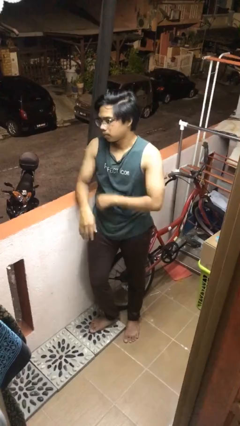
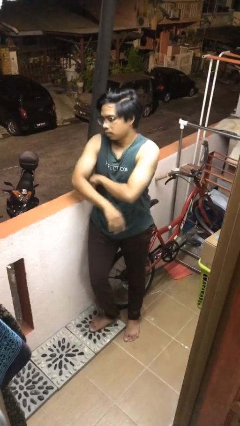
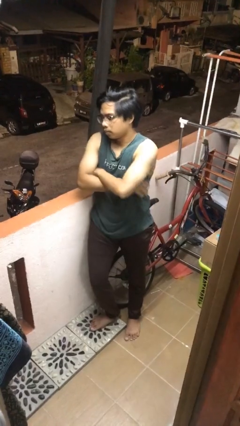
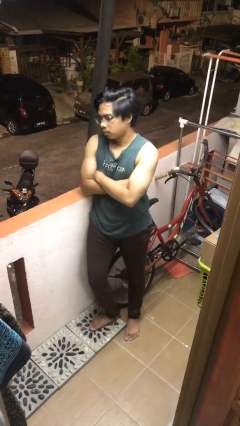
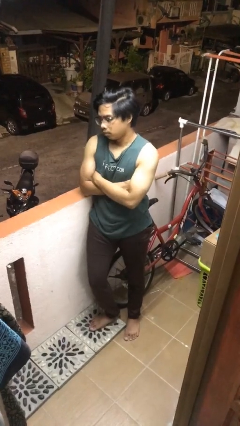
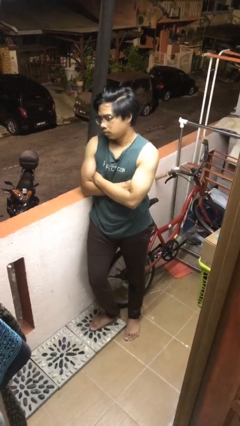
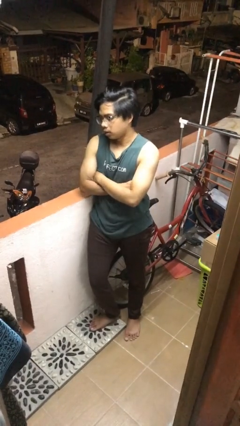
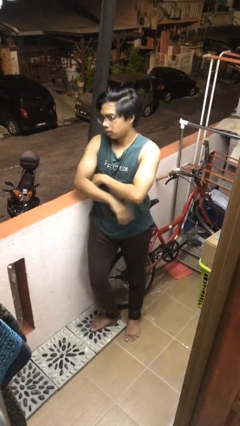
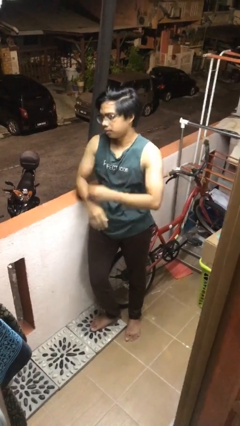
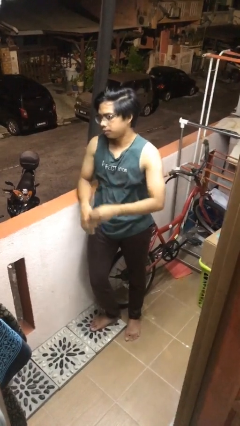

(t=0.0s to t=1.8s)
person crosses arms

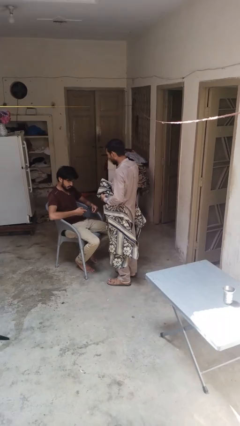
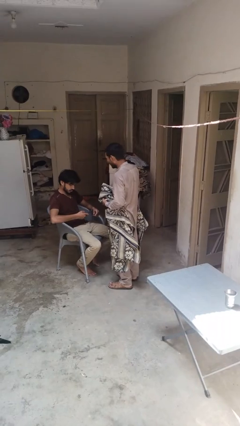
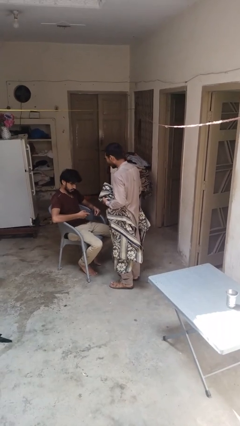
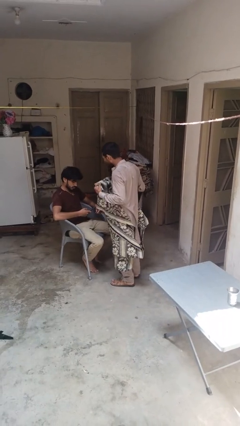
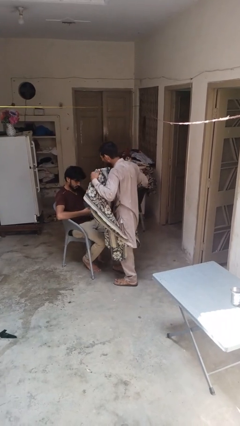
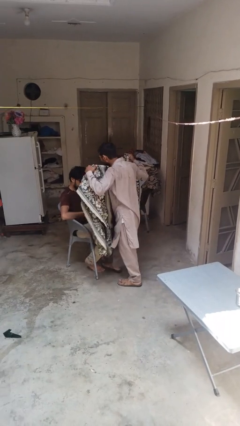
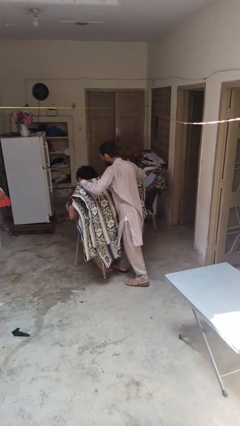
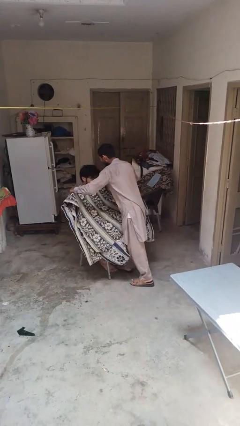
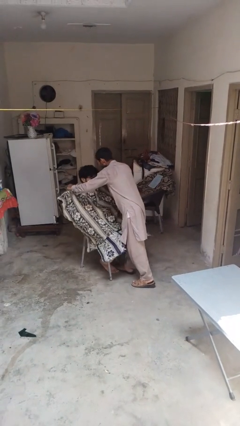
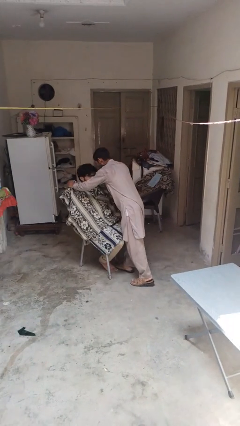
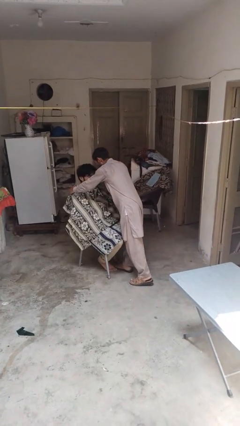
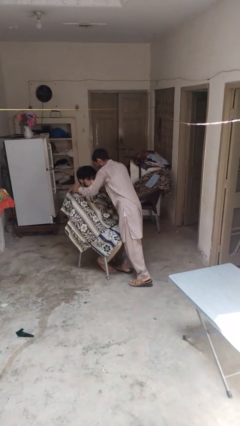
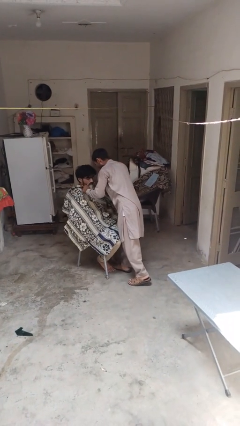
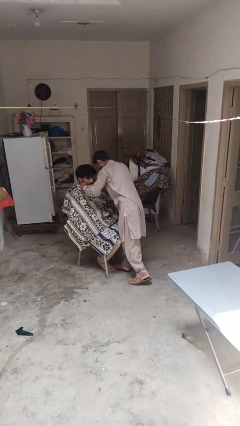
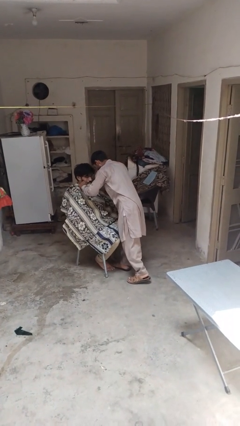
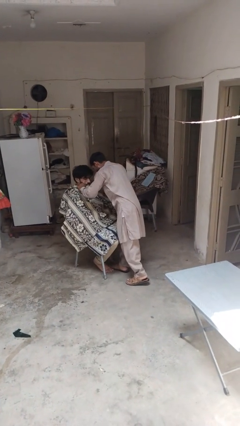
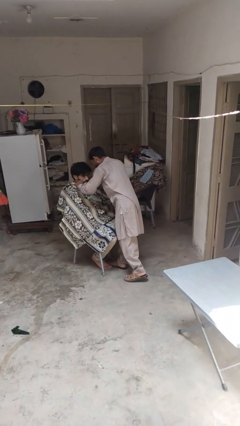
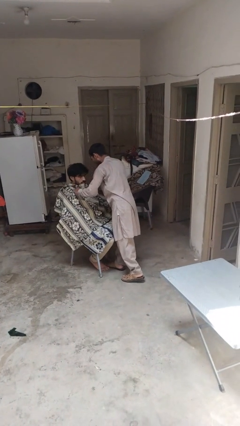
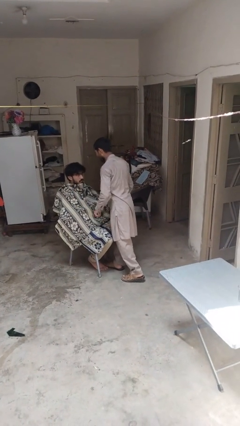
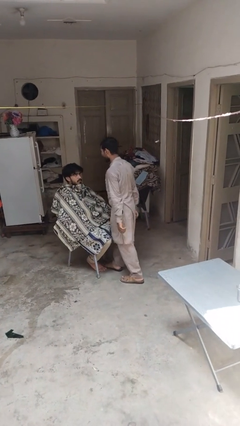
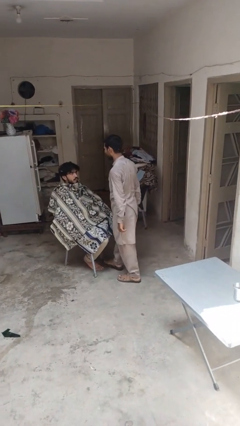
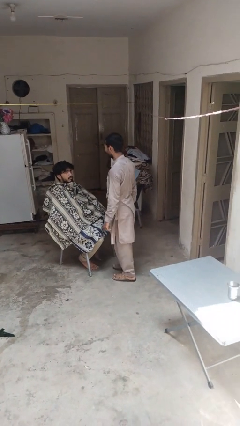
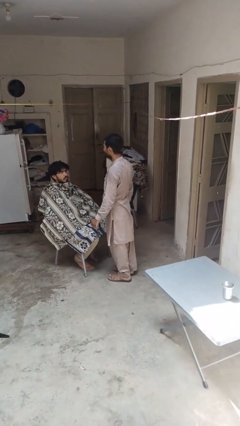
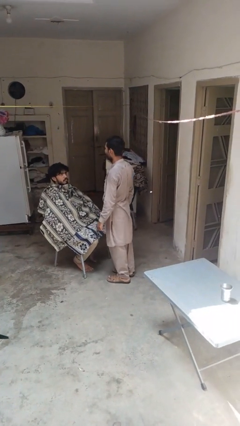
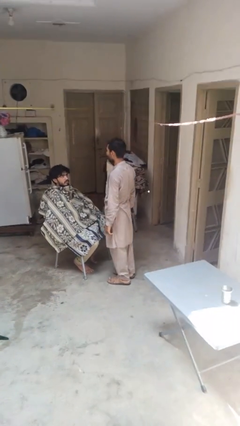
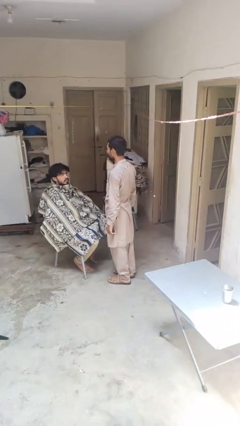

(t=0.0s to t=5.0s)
person covers friend with blanket

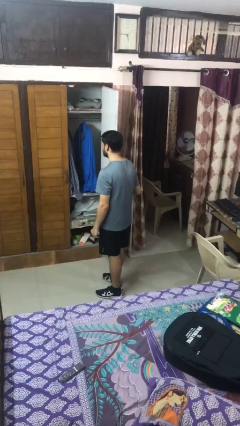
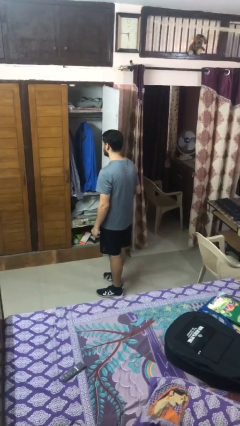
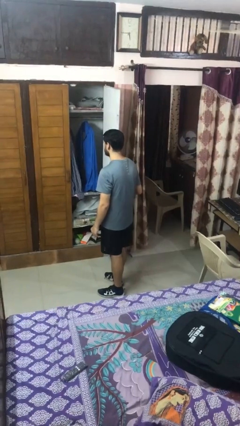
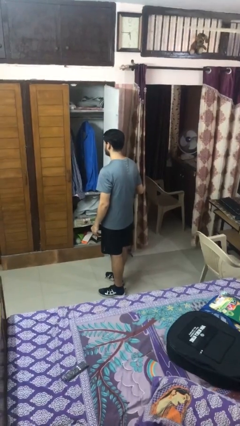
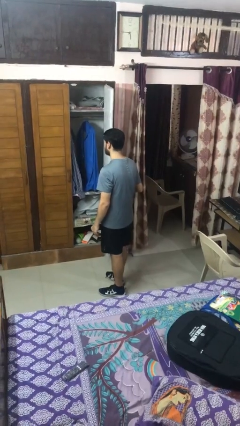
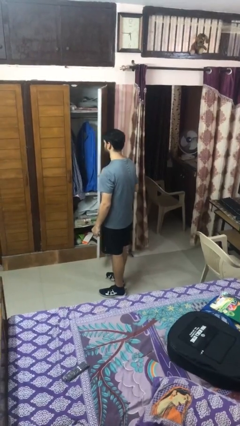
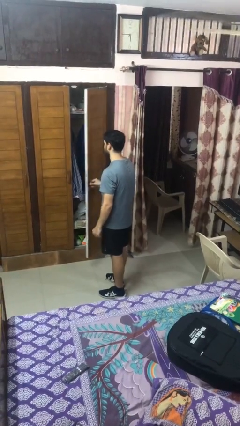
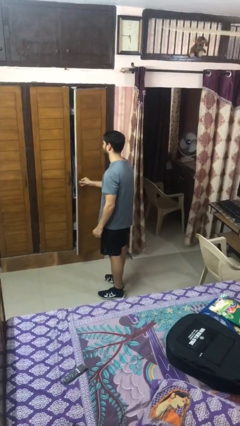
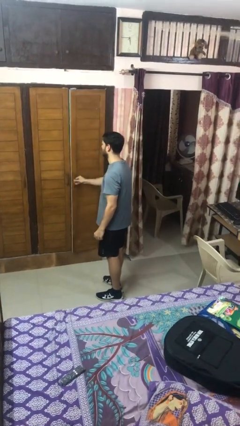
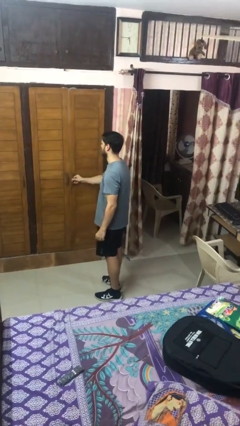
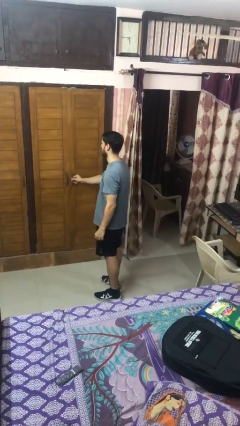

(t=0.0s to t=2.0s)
person closes closet door

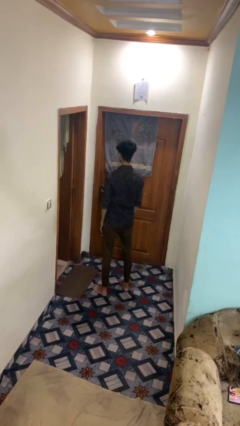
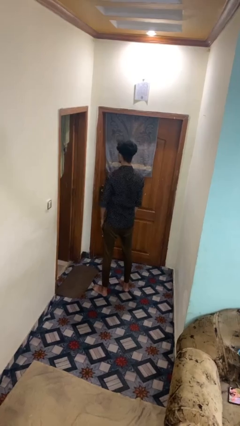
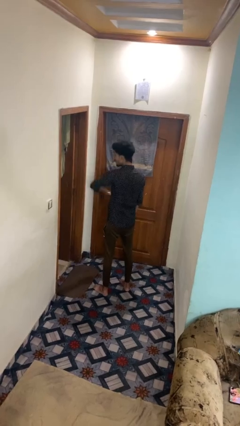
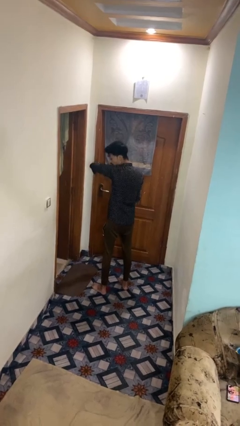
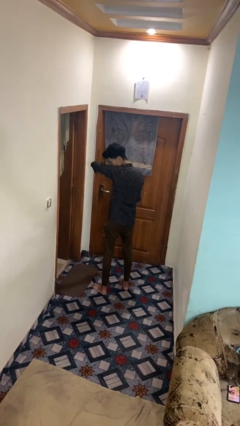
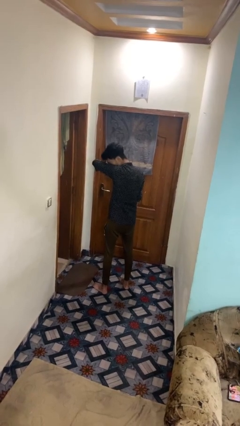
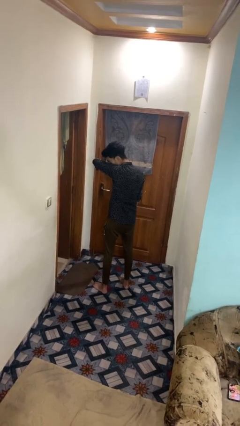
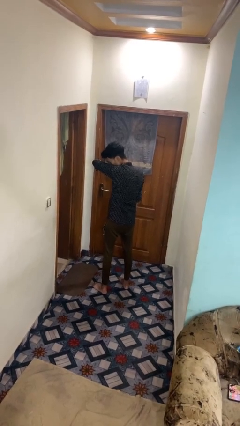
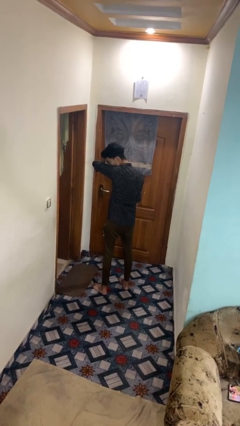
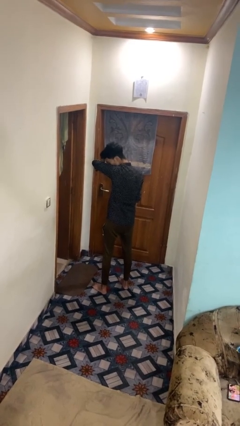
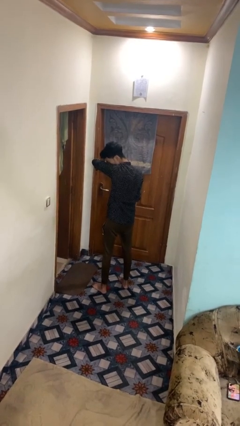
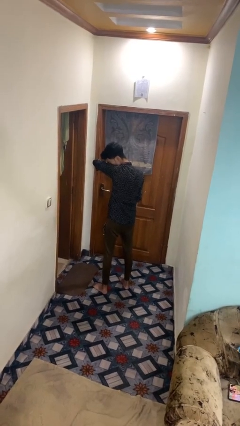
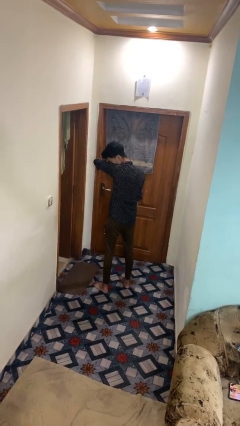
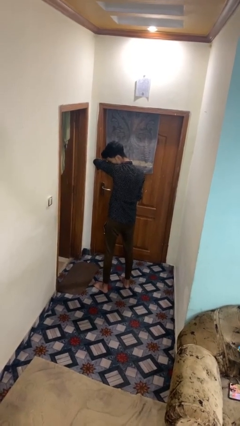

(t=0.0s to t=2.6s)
person sneezes into arm

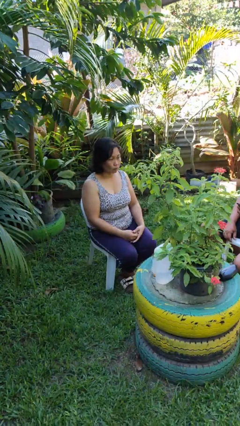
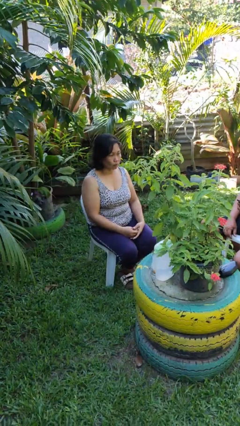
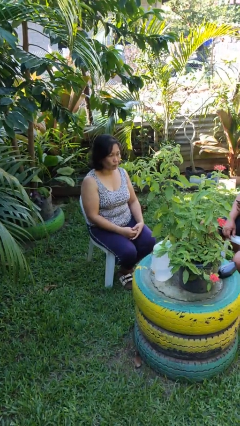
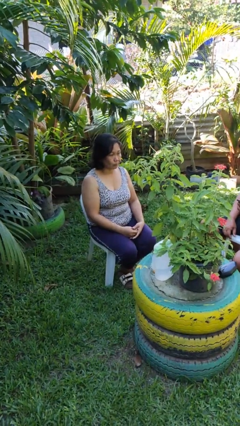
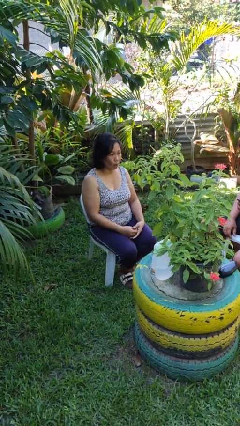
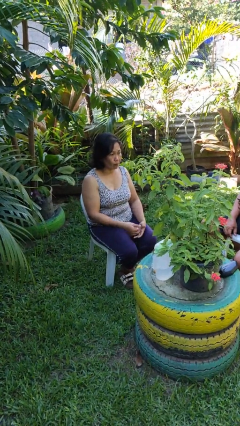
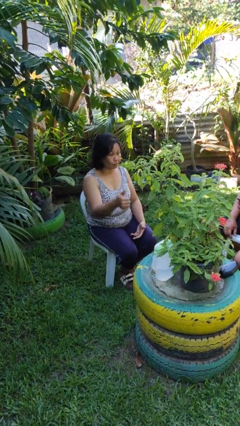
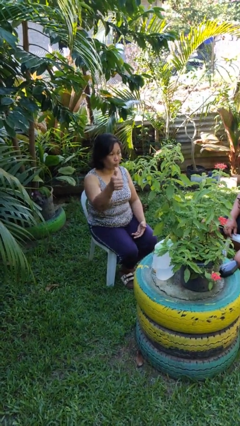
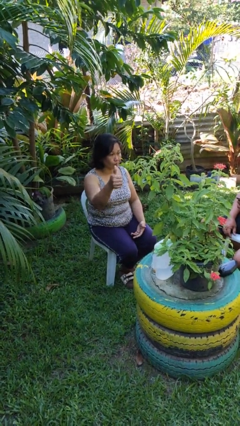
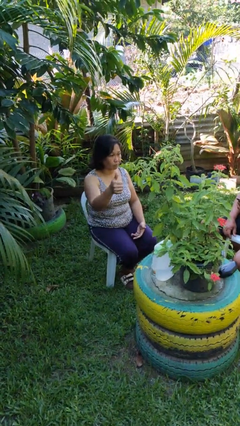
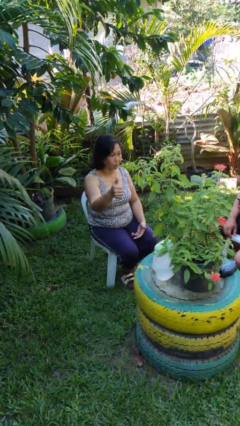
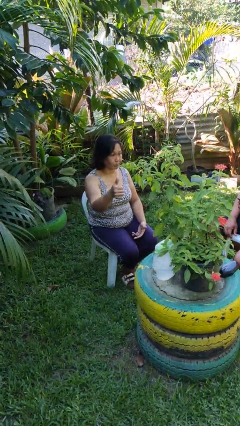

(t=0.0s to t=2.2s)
person gestures thumbs up

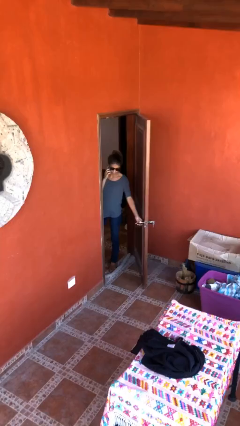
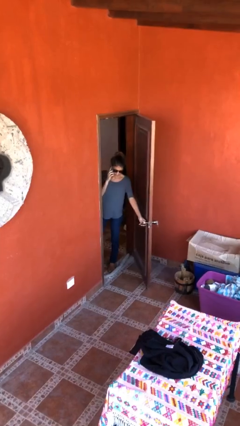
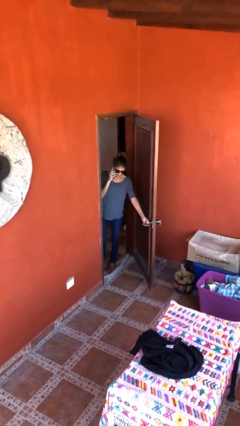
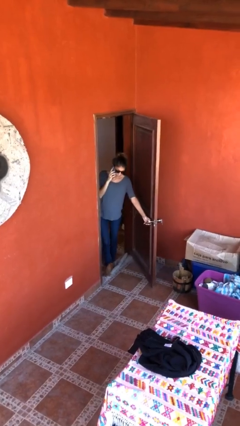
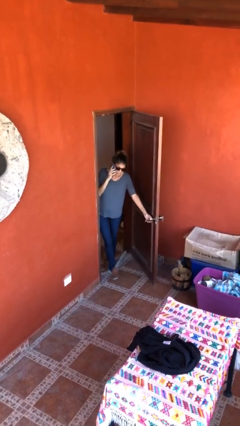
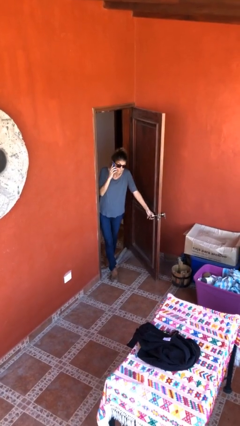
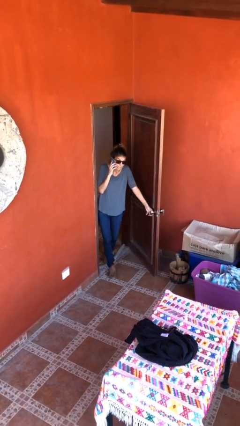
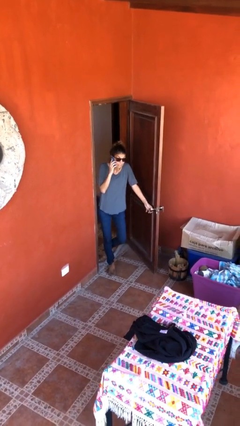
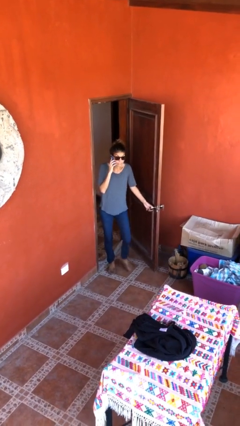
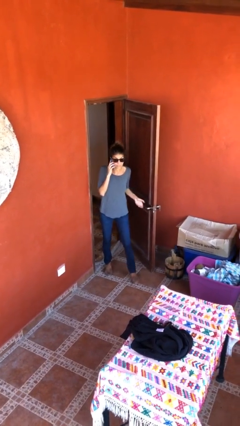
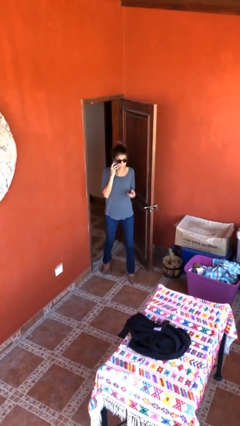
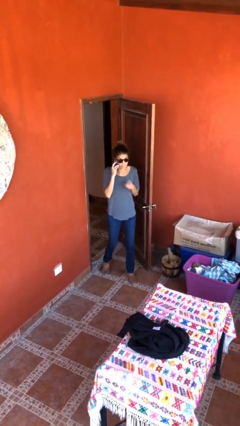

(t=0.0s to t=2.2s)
person enters scene through structure

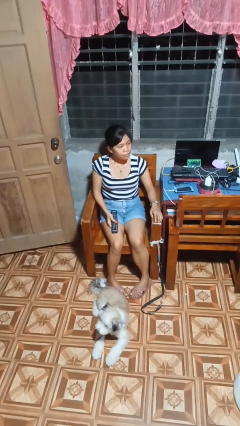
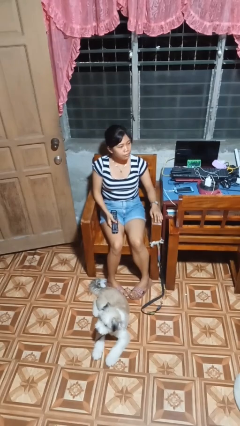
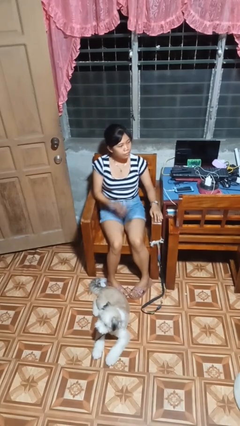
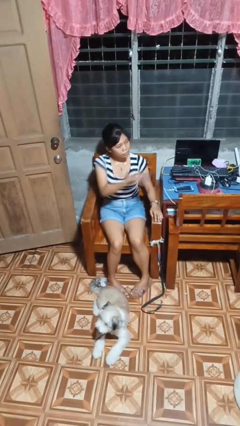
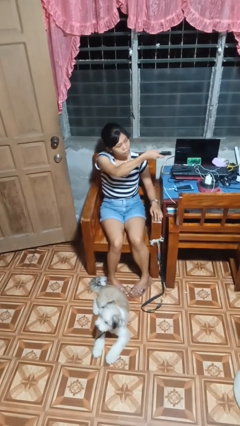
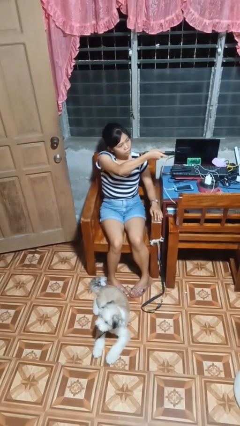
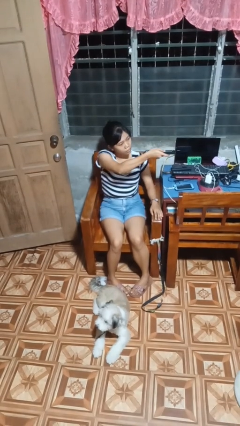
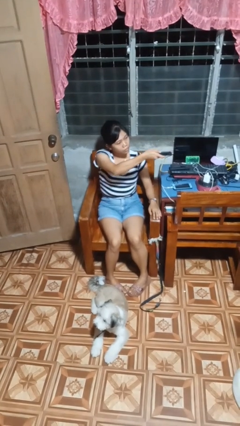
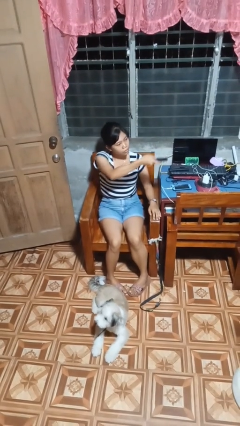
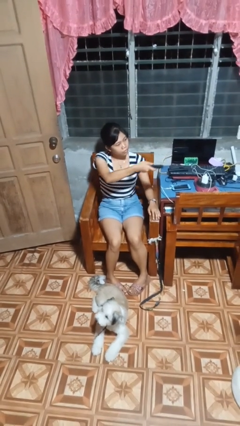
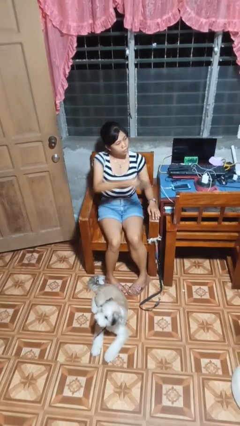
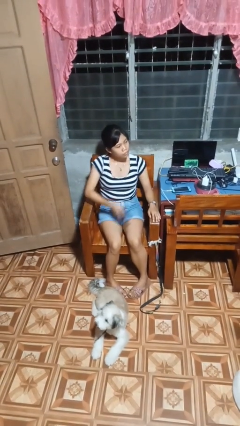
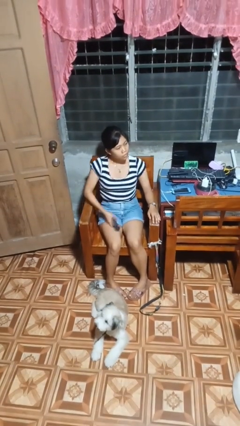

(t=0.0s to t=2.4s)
person uses television remote
